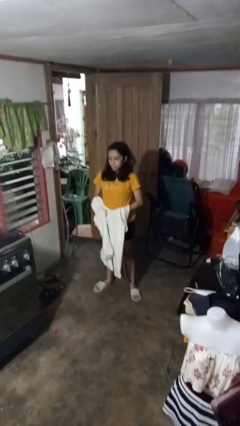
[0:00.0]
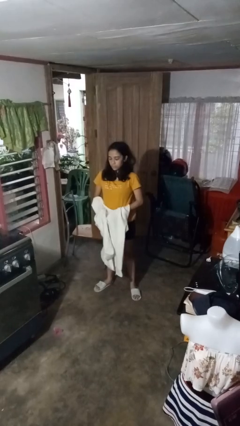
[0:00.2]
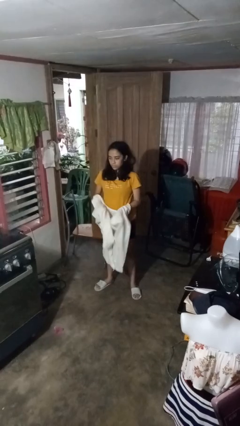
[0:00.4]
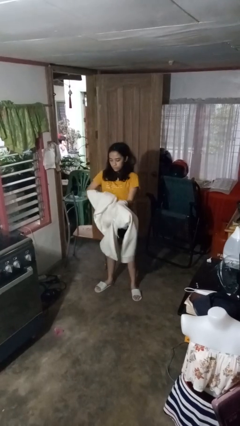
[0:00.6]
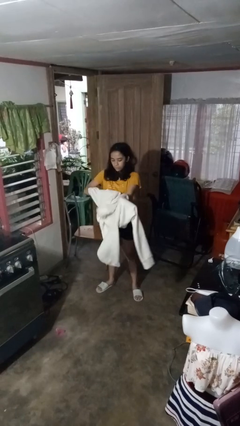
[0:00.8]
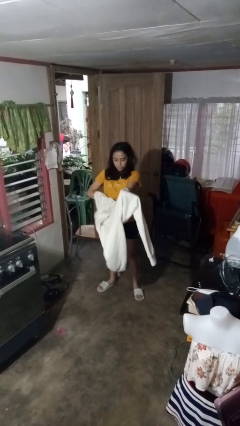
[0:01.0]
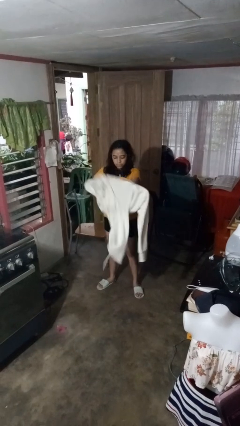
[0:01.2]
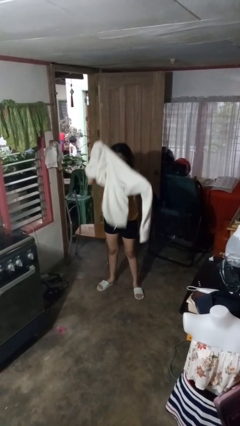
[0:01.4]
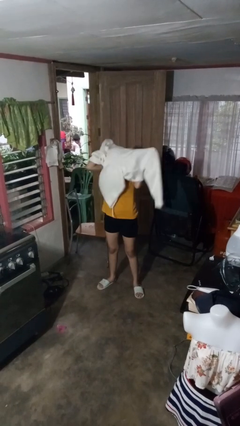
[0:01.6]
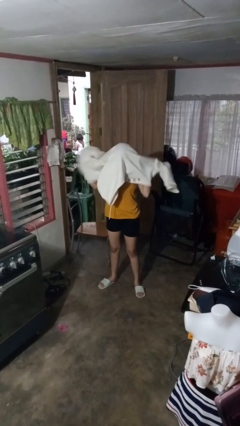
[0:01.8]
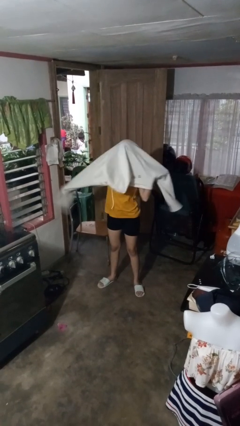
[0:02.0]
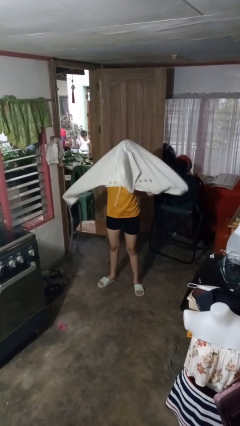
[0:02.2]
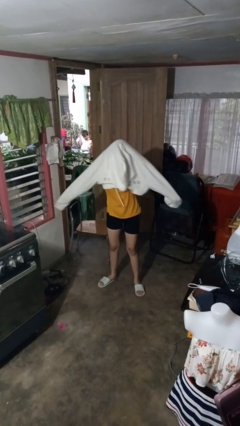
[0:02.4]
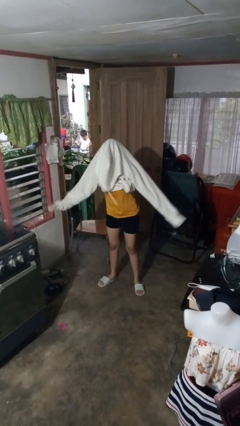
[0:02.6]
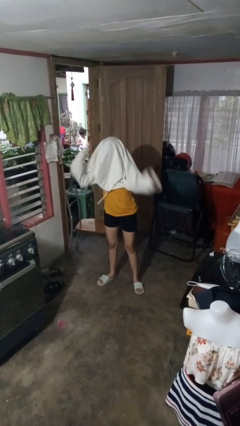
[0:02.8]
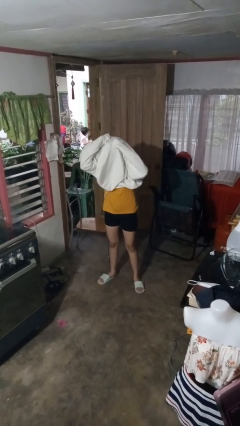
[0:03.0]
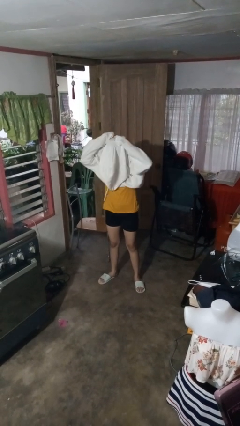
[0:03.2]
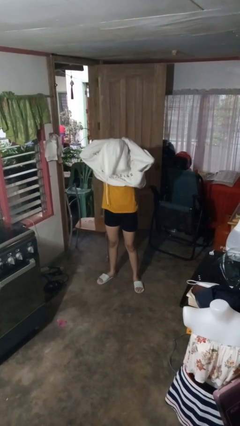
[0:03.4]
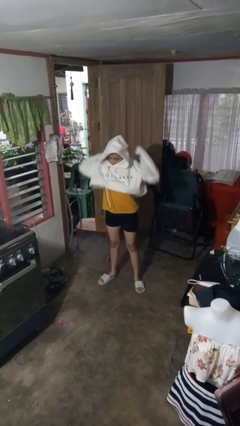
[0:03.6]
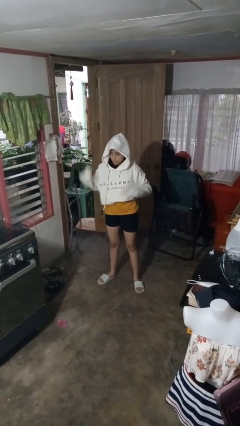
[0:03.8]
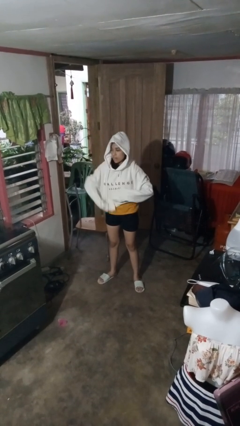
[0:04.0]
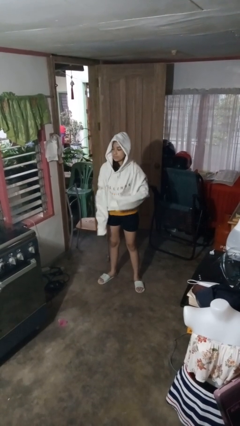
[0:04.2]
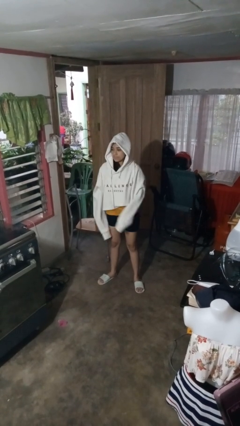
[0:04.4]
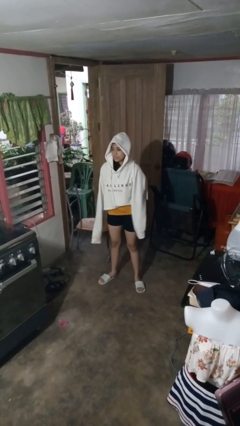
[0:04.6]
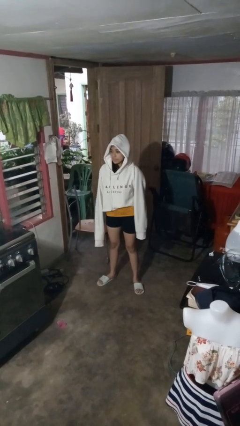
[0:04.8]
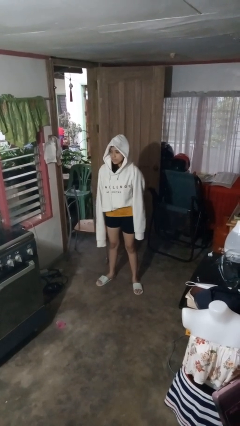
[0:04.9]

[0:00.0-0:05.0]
person puts on hoodie

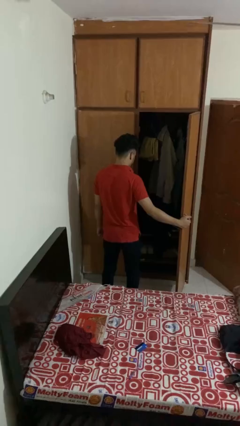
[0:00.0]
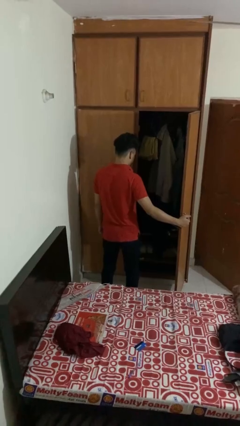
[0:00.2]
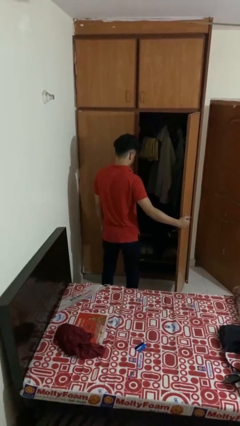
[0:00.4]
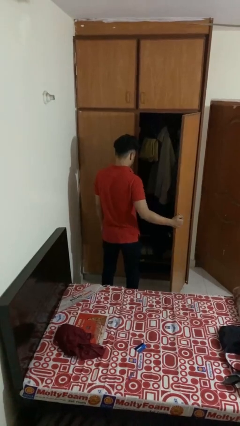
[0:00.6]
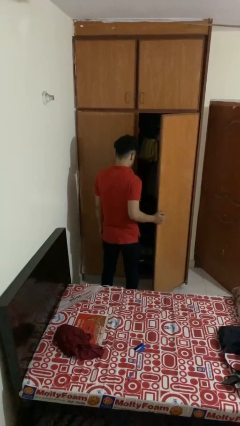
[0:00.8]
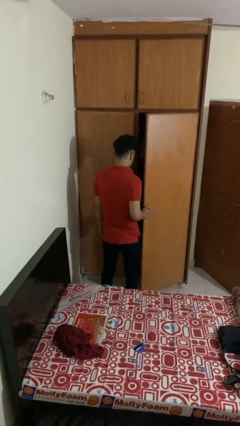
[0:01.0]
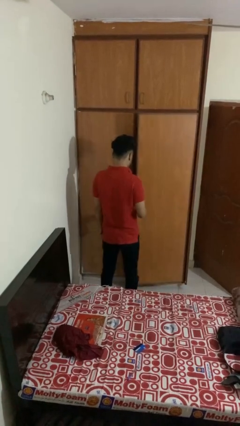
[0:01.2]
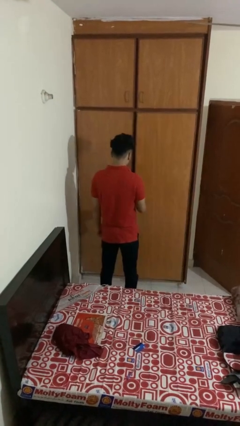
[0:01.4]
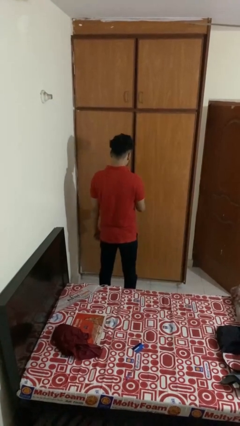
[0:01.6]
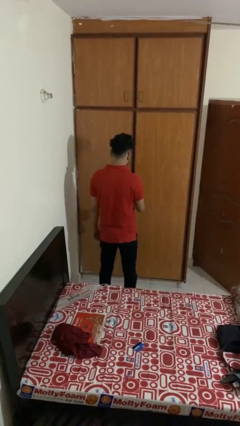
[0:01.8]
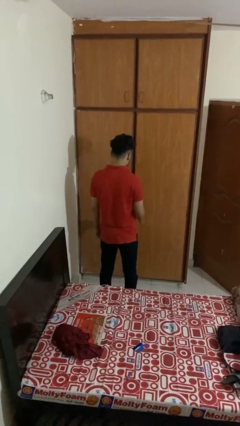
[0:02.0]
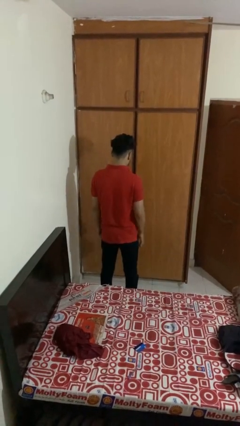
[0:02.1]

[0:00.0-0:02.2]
person closes closet door

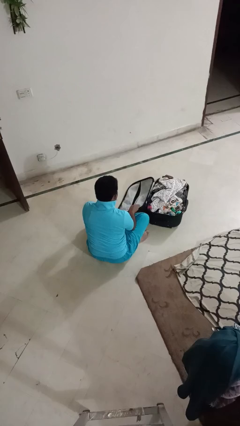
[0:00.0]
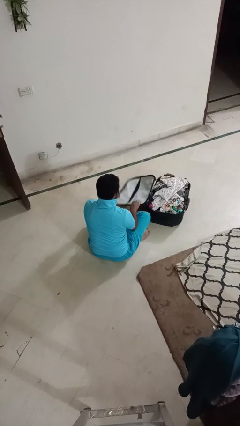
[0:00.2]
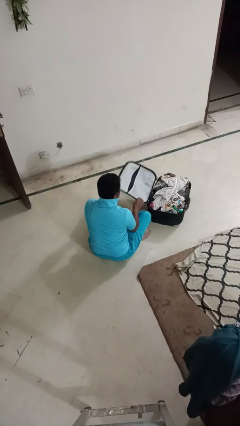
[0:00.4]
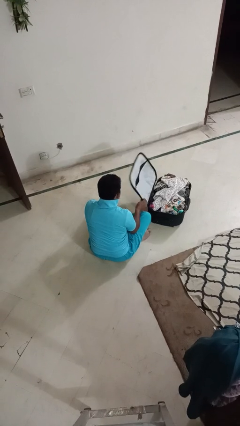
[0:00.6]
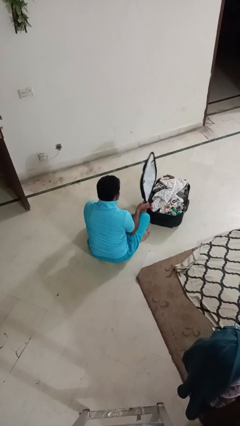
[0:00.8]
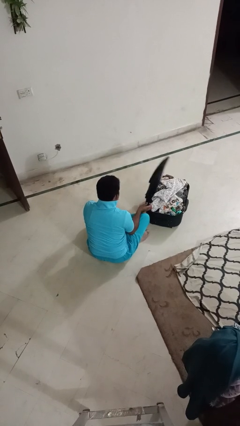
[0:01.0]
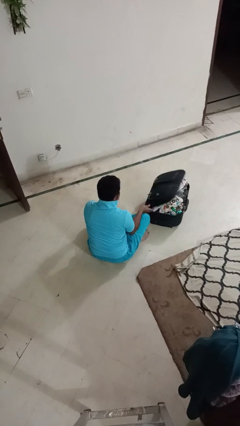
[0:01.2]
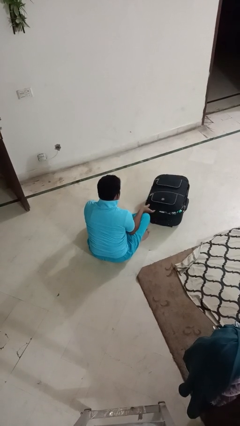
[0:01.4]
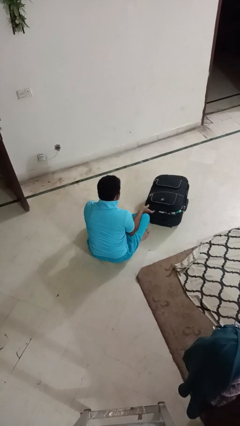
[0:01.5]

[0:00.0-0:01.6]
person closes suitcase

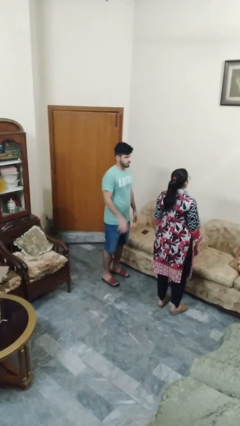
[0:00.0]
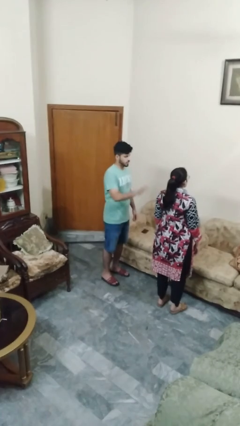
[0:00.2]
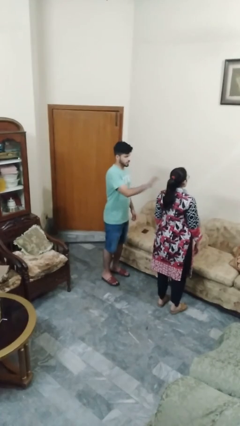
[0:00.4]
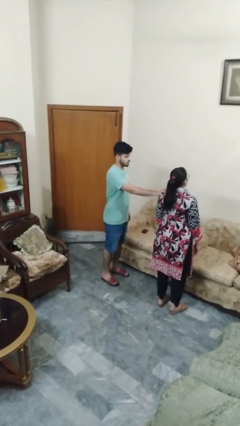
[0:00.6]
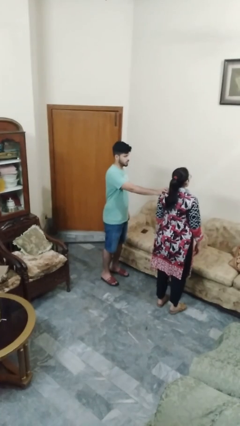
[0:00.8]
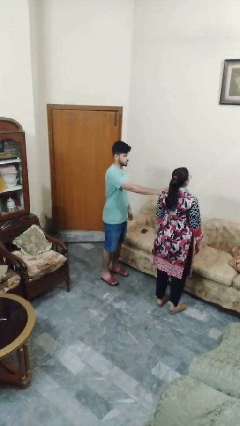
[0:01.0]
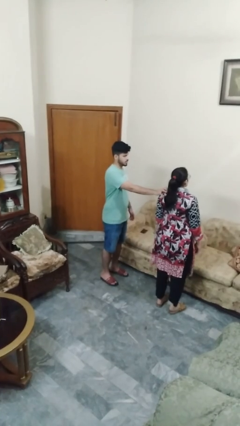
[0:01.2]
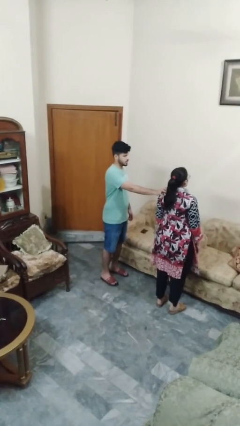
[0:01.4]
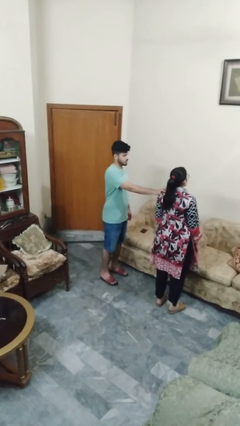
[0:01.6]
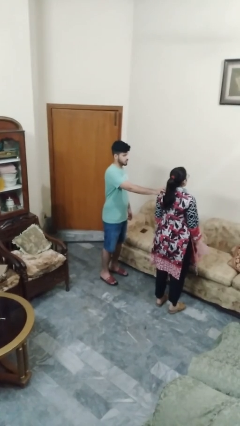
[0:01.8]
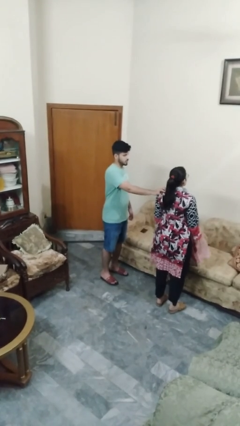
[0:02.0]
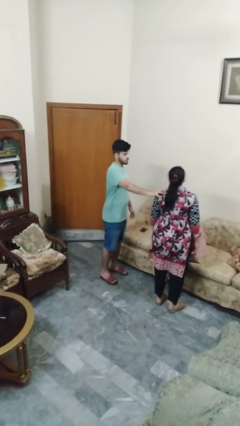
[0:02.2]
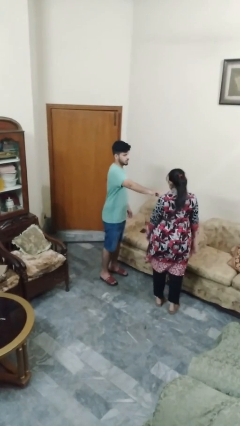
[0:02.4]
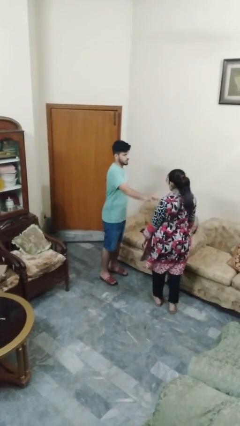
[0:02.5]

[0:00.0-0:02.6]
person grabs person by shoulder

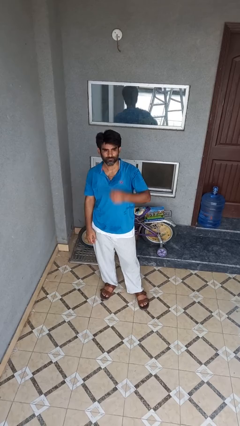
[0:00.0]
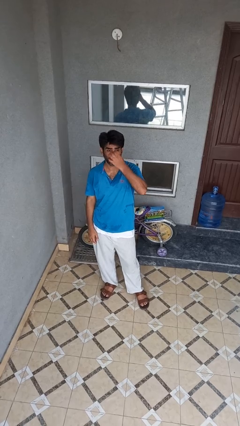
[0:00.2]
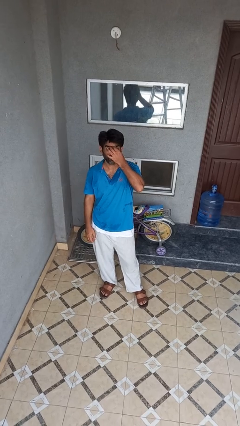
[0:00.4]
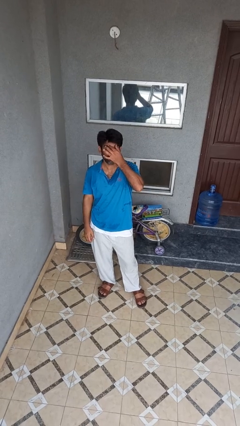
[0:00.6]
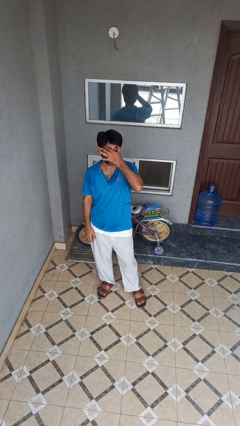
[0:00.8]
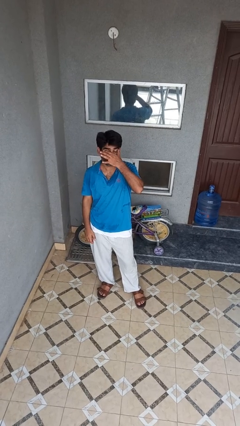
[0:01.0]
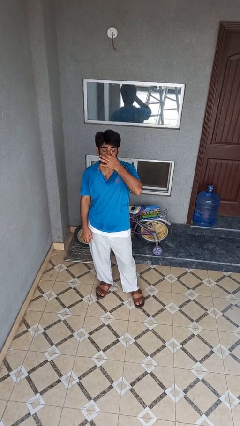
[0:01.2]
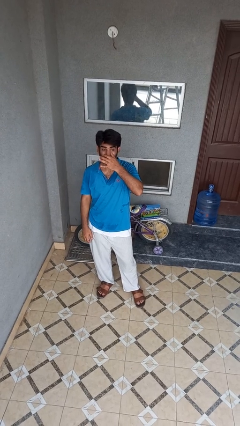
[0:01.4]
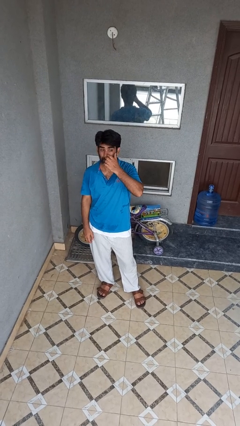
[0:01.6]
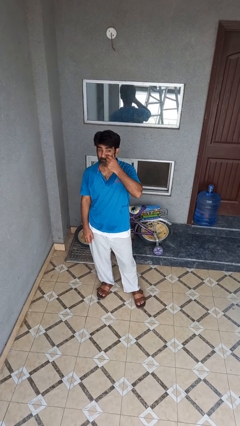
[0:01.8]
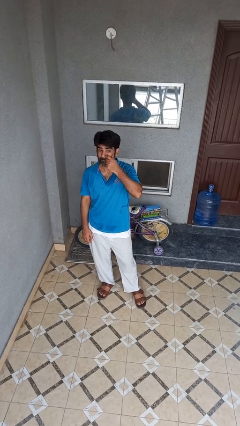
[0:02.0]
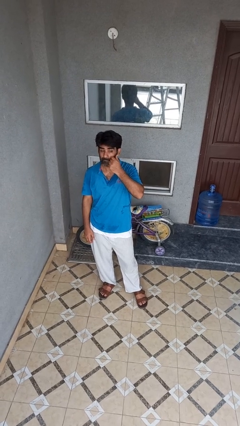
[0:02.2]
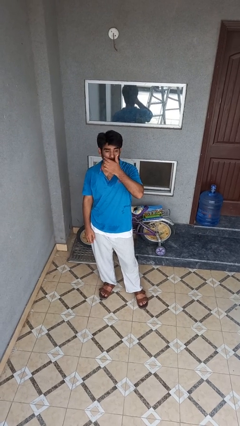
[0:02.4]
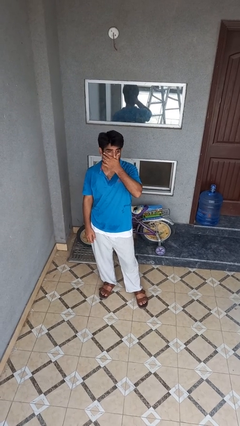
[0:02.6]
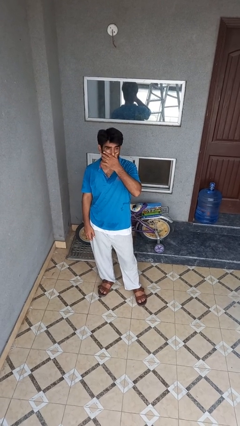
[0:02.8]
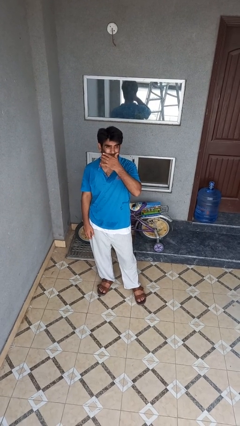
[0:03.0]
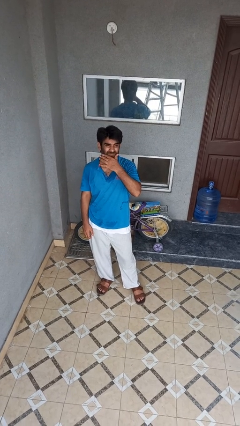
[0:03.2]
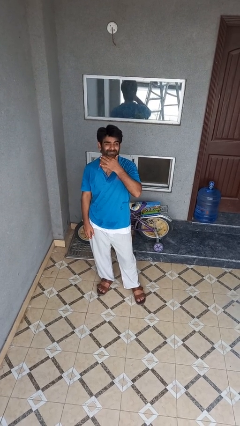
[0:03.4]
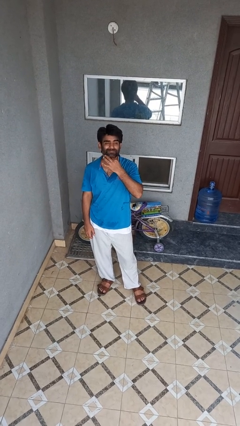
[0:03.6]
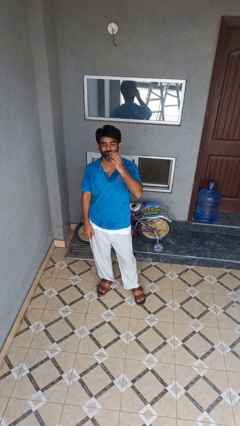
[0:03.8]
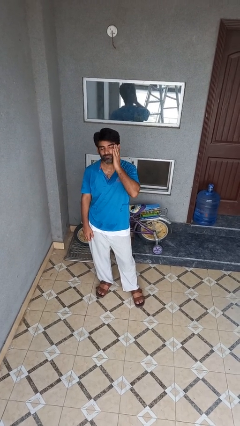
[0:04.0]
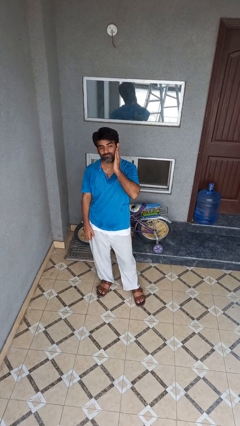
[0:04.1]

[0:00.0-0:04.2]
person scratches face

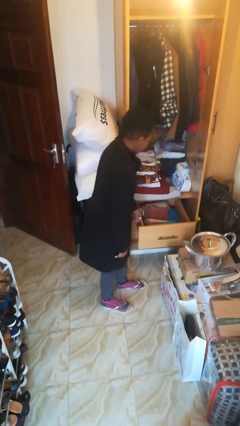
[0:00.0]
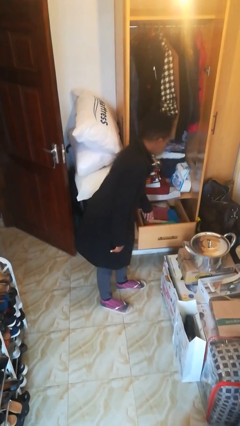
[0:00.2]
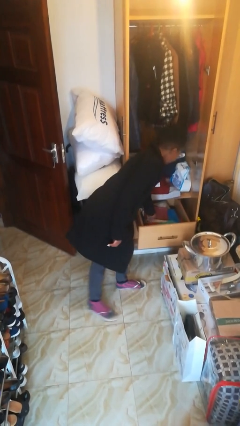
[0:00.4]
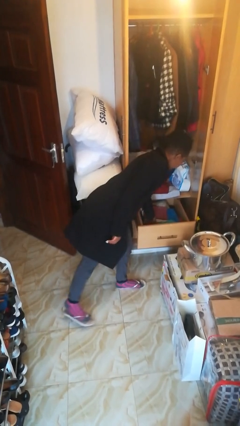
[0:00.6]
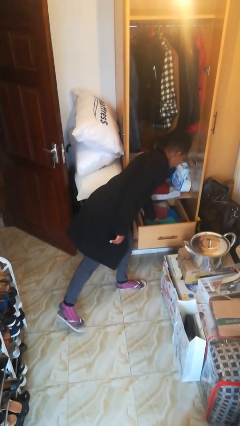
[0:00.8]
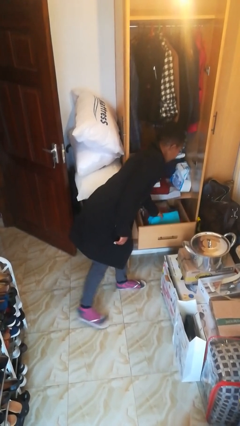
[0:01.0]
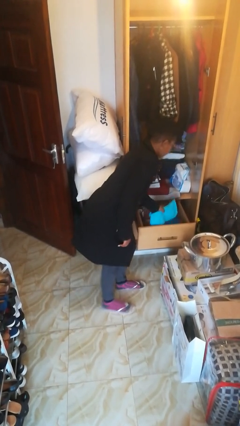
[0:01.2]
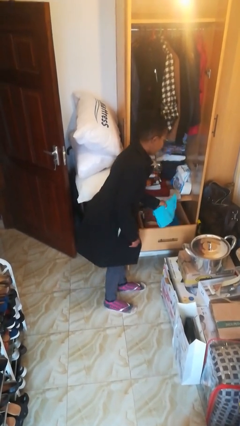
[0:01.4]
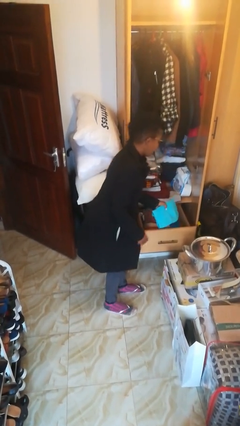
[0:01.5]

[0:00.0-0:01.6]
person takes clothes from dresser
